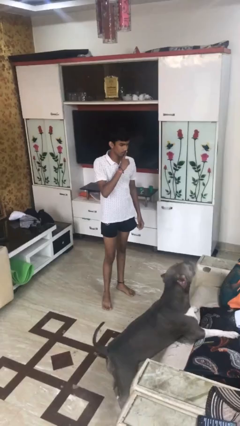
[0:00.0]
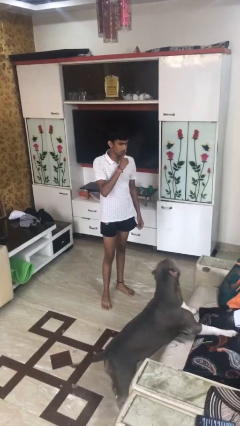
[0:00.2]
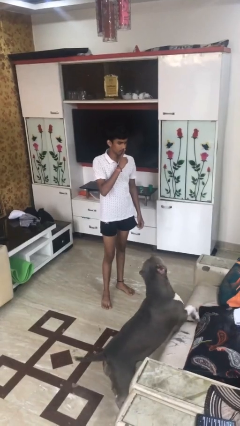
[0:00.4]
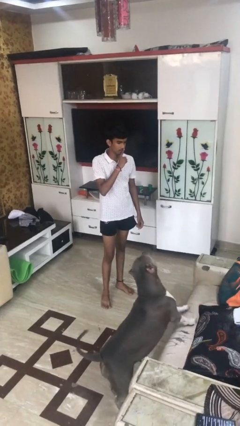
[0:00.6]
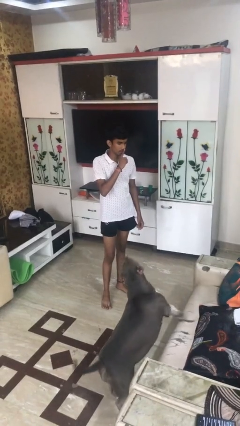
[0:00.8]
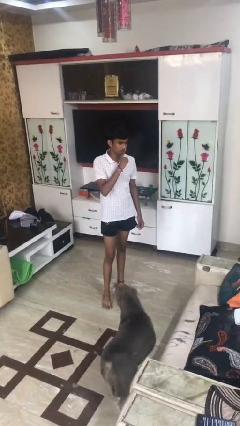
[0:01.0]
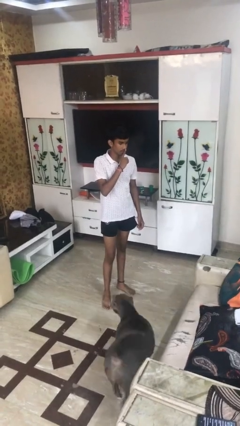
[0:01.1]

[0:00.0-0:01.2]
person gestures be quiet

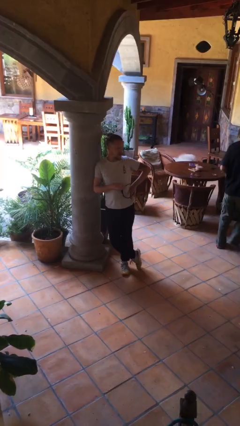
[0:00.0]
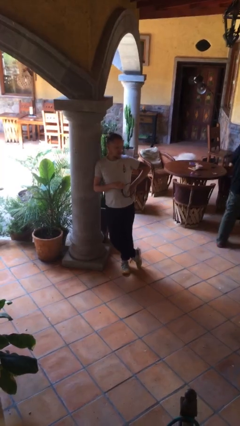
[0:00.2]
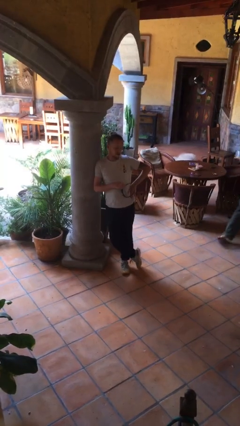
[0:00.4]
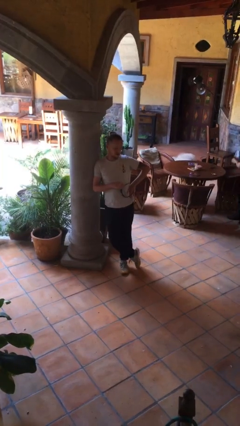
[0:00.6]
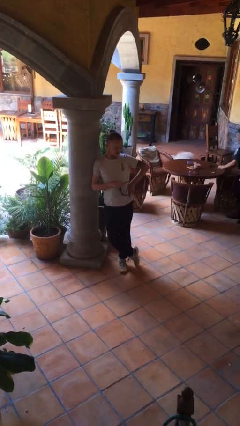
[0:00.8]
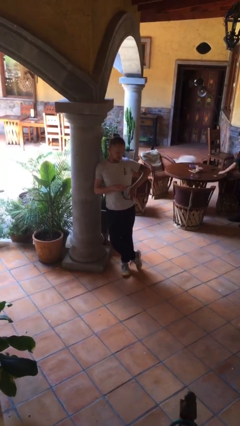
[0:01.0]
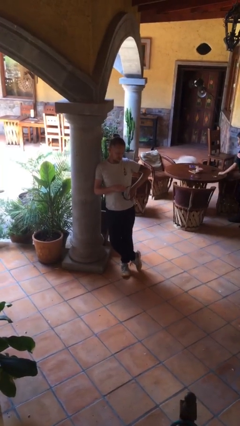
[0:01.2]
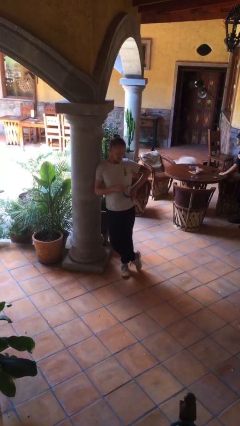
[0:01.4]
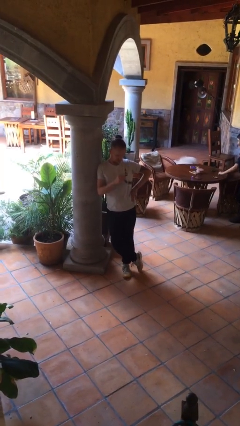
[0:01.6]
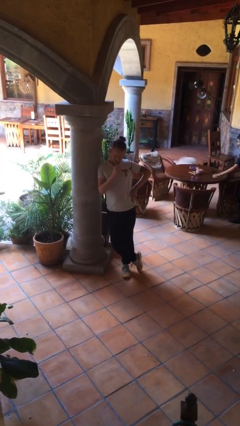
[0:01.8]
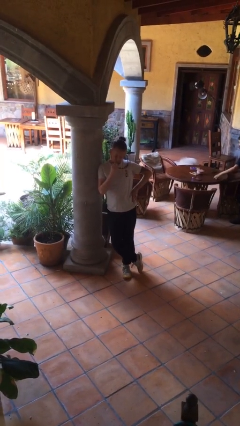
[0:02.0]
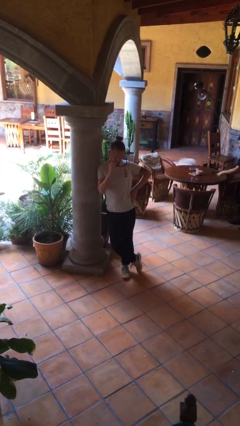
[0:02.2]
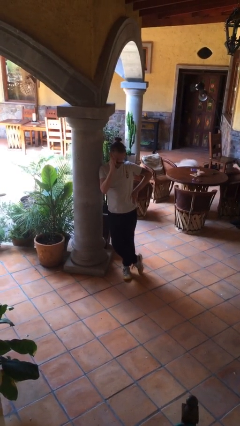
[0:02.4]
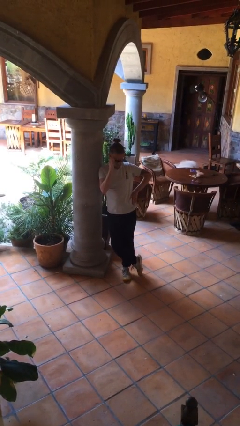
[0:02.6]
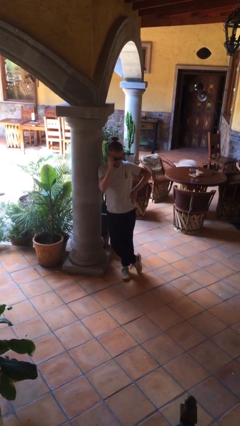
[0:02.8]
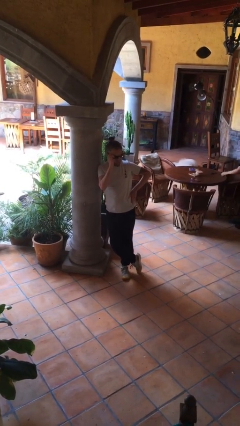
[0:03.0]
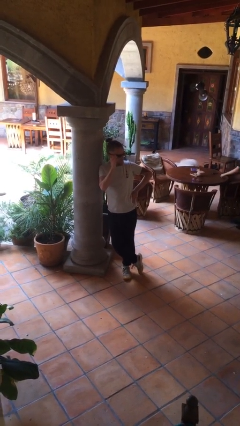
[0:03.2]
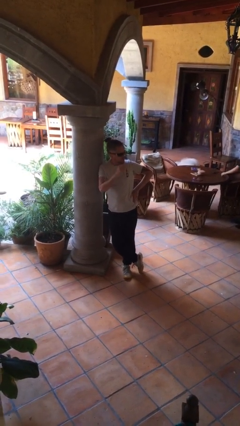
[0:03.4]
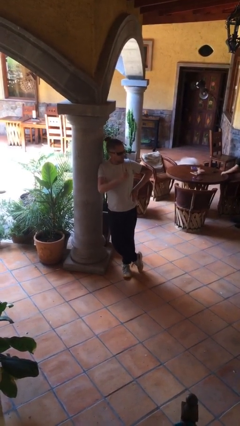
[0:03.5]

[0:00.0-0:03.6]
person puts on sunglasses

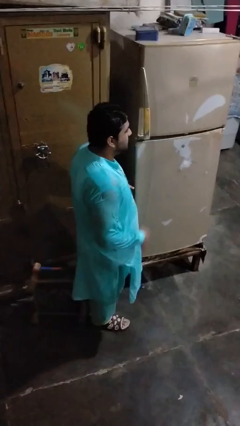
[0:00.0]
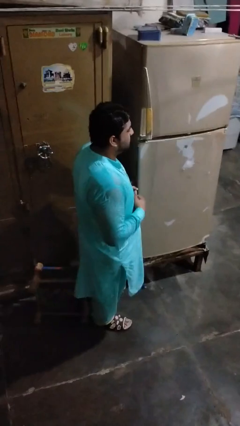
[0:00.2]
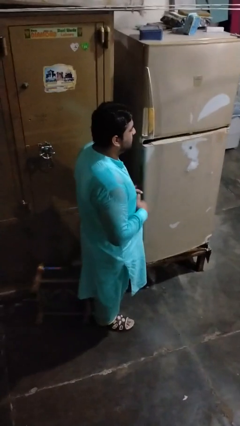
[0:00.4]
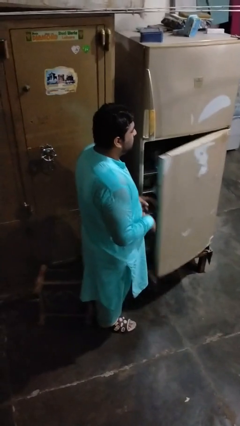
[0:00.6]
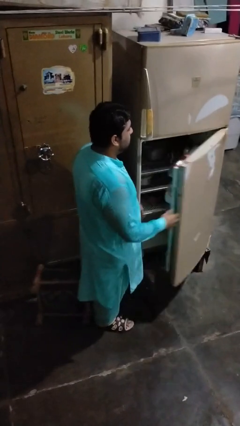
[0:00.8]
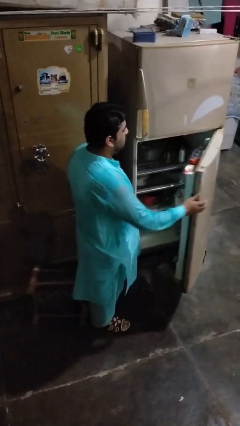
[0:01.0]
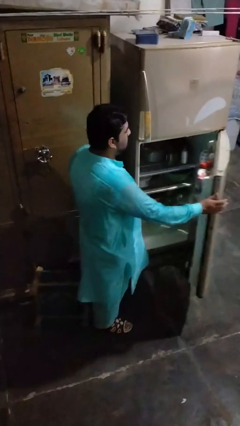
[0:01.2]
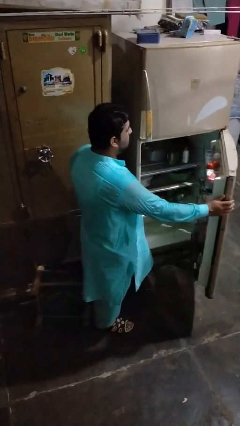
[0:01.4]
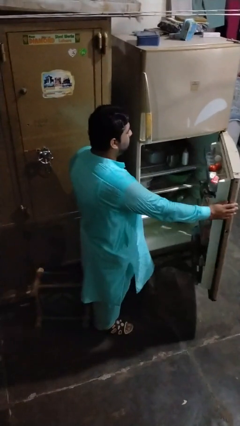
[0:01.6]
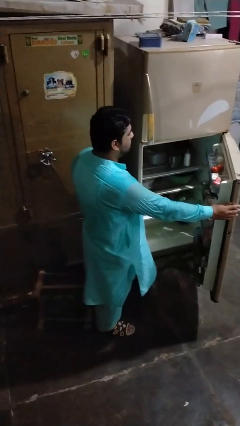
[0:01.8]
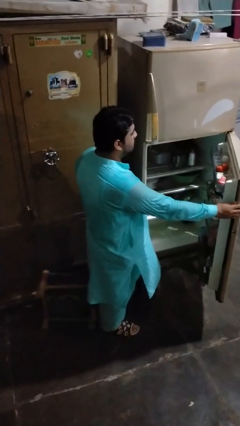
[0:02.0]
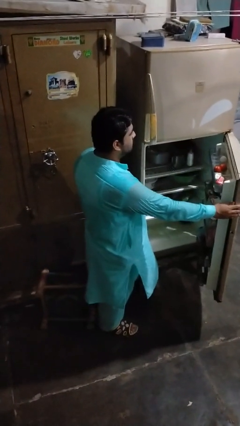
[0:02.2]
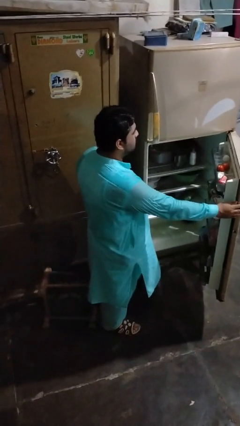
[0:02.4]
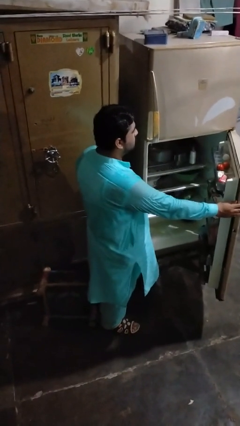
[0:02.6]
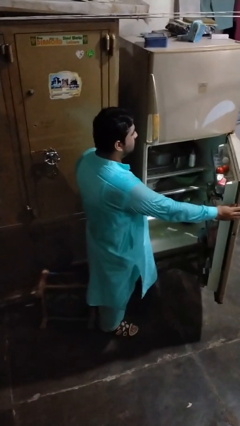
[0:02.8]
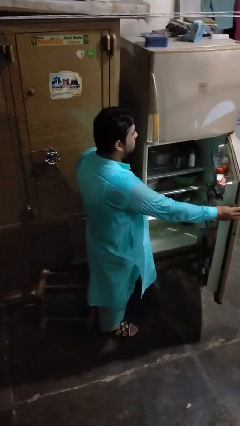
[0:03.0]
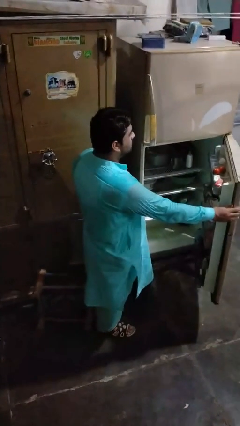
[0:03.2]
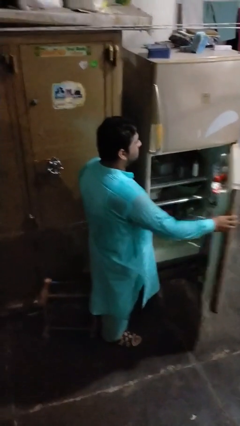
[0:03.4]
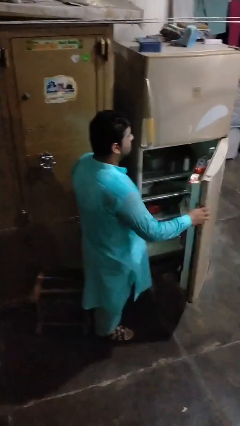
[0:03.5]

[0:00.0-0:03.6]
person opens refrigerator

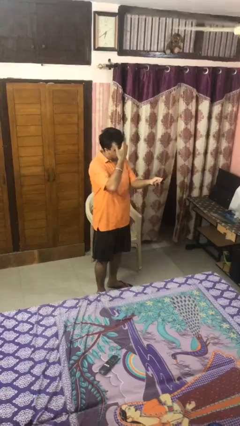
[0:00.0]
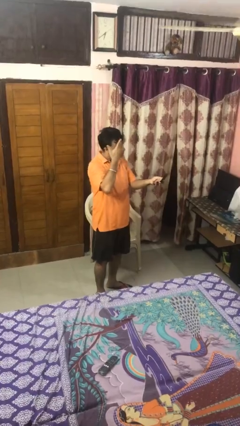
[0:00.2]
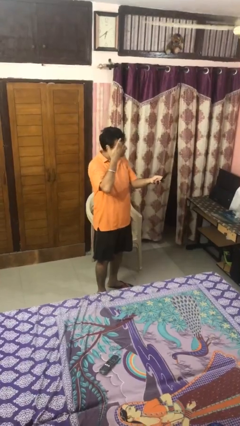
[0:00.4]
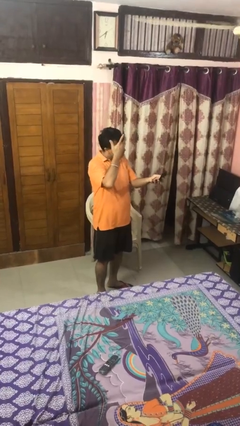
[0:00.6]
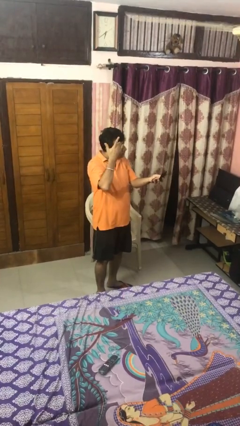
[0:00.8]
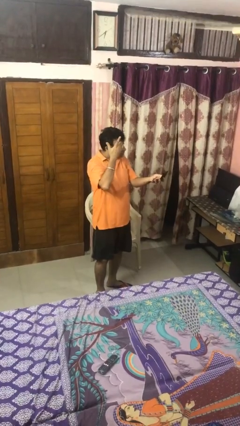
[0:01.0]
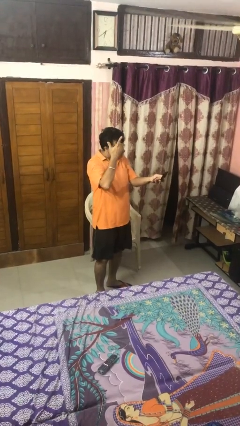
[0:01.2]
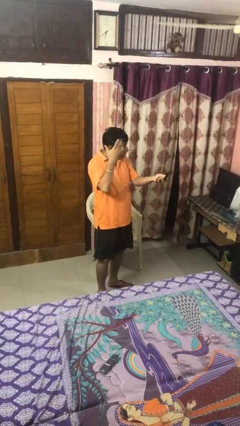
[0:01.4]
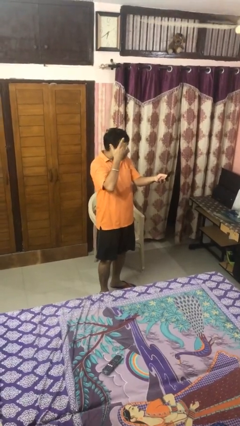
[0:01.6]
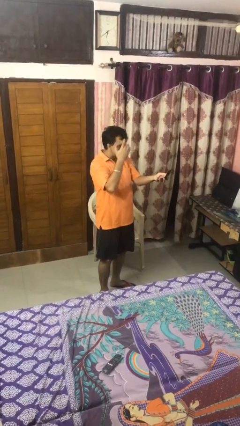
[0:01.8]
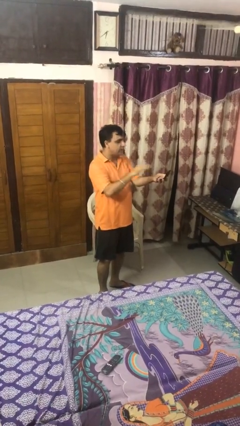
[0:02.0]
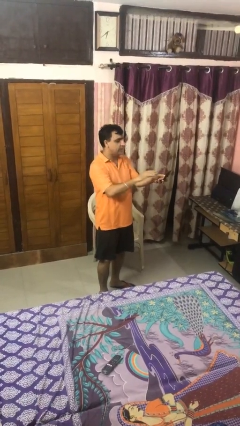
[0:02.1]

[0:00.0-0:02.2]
person applies foundation makeup

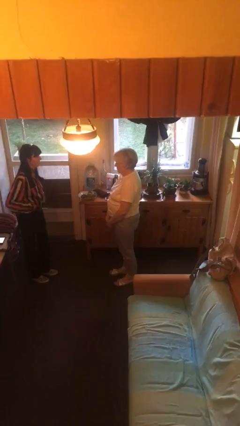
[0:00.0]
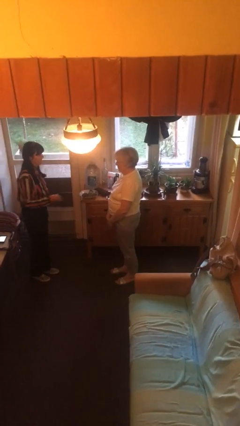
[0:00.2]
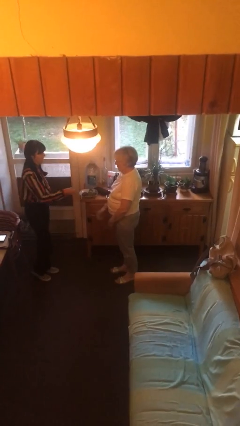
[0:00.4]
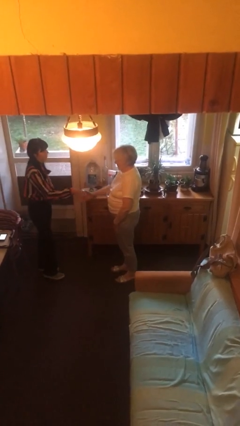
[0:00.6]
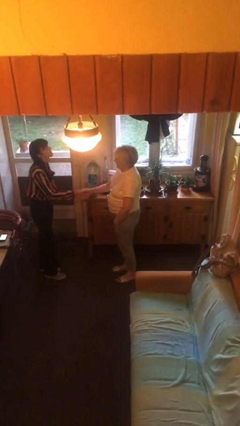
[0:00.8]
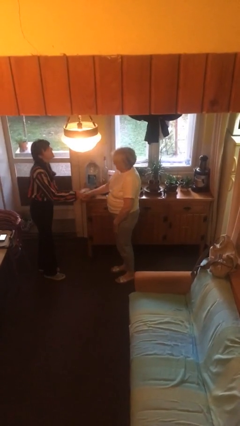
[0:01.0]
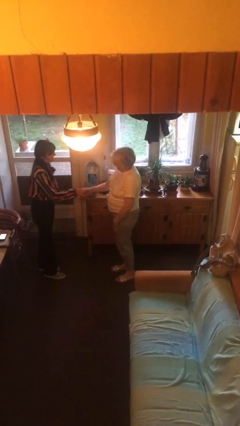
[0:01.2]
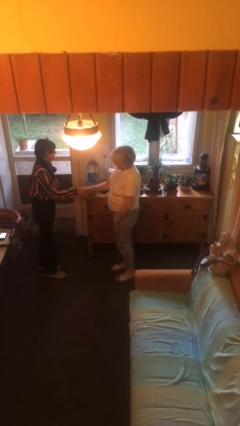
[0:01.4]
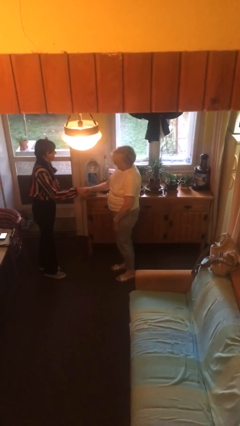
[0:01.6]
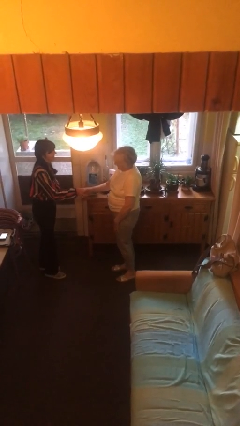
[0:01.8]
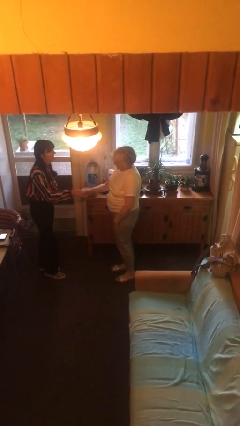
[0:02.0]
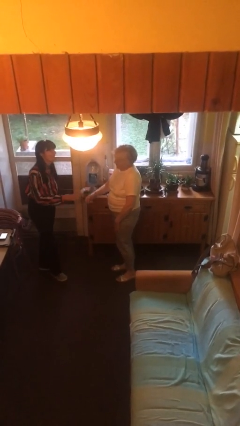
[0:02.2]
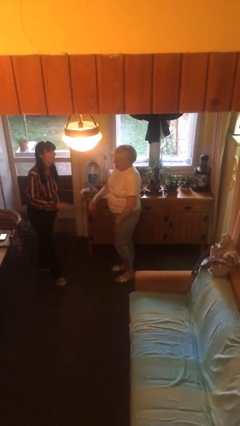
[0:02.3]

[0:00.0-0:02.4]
person shakes hand

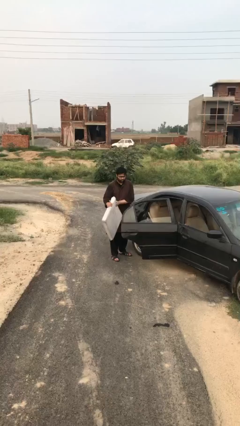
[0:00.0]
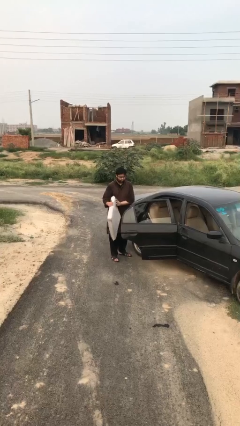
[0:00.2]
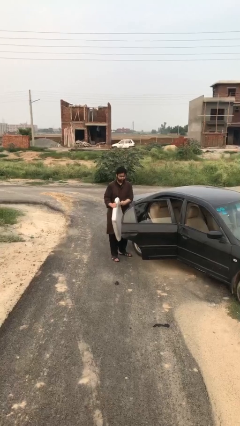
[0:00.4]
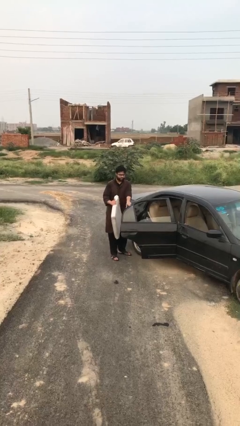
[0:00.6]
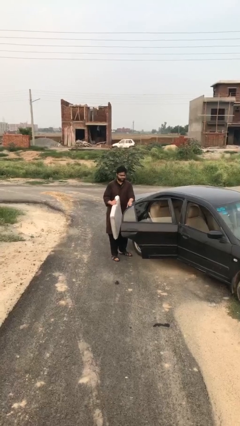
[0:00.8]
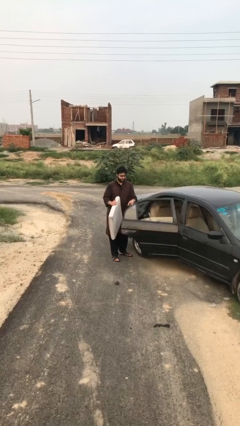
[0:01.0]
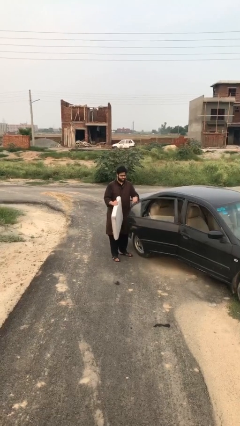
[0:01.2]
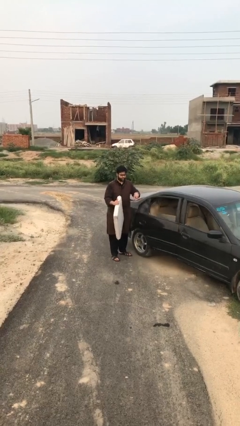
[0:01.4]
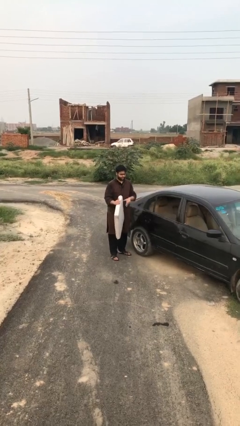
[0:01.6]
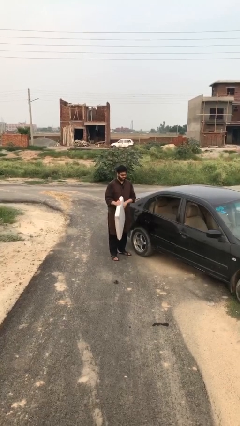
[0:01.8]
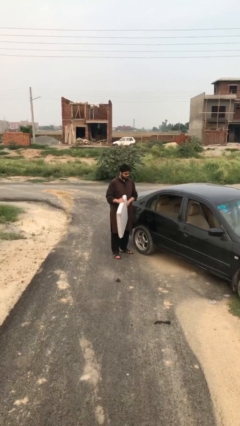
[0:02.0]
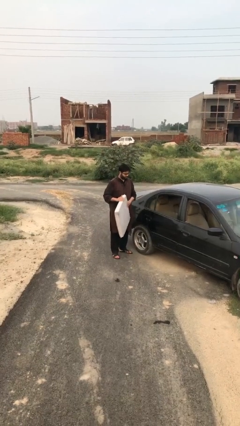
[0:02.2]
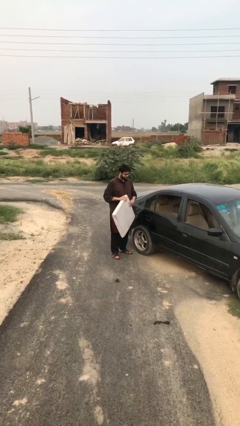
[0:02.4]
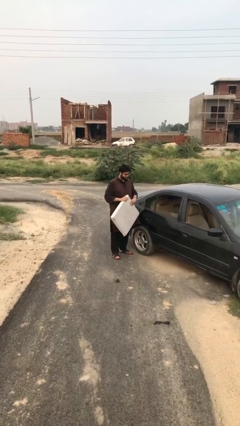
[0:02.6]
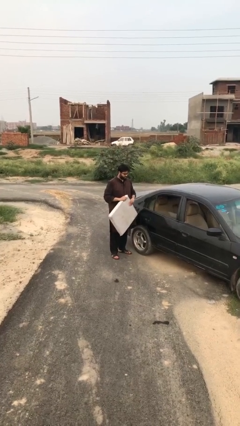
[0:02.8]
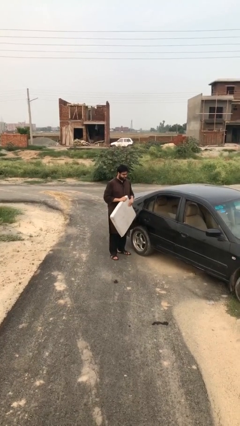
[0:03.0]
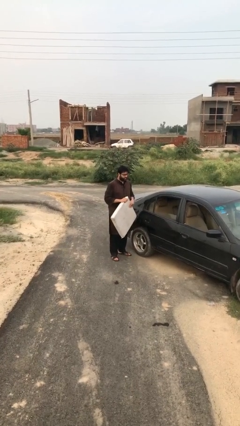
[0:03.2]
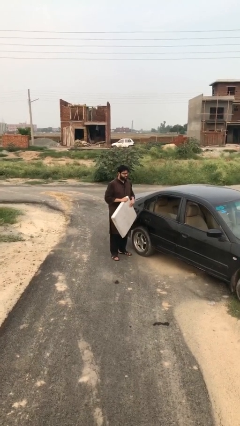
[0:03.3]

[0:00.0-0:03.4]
person closes car door

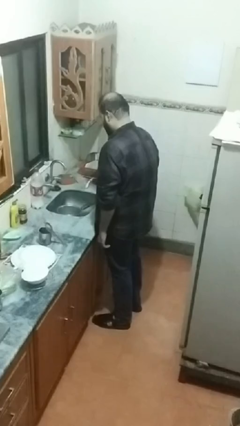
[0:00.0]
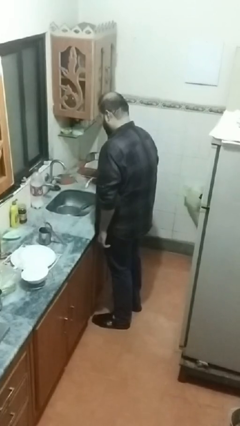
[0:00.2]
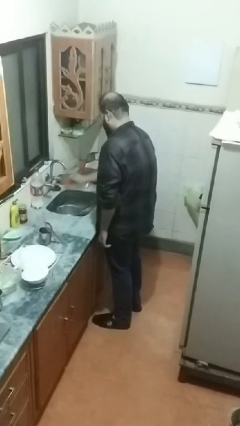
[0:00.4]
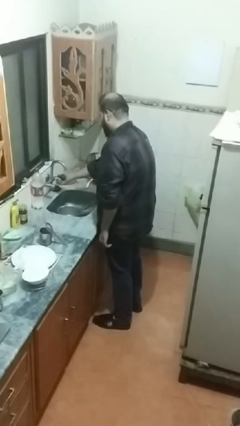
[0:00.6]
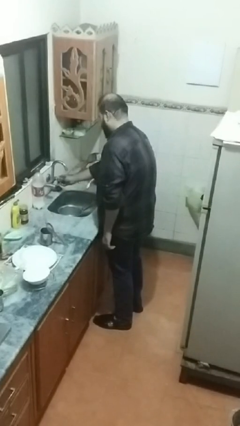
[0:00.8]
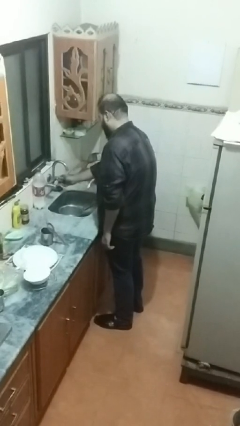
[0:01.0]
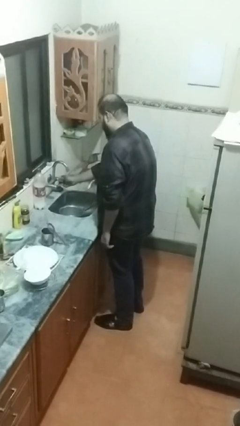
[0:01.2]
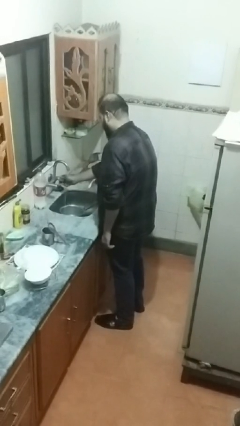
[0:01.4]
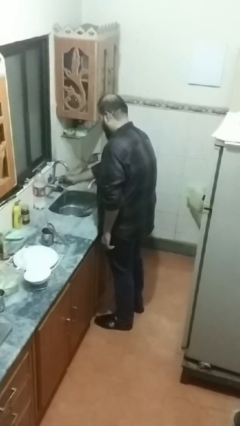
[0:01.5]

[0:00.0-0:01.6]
person turns on faucet
